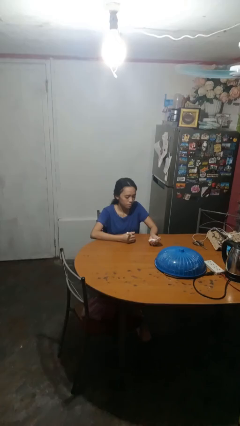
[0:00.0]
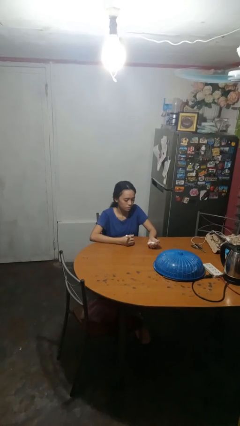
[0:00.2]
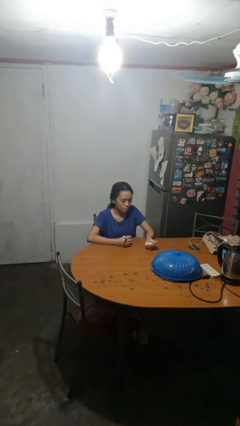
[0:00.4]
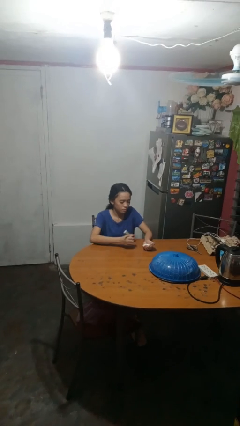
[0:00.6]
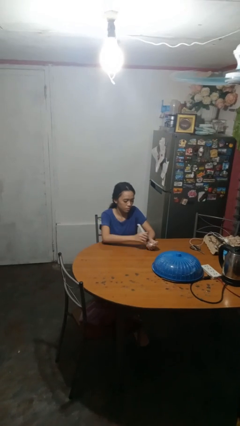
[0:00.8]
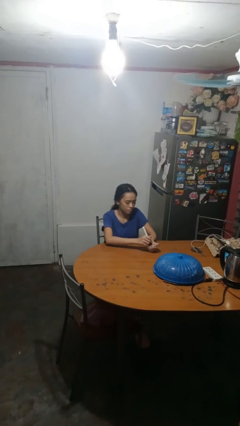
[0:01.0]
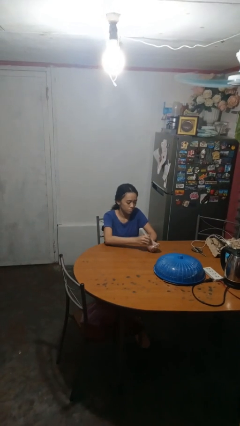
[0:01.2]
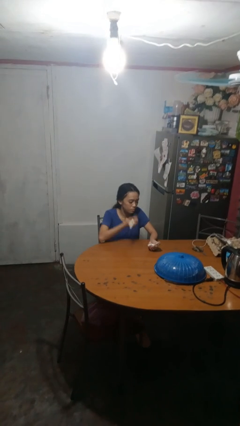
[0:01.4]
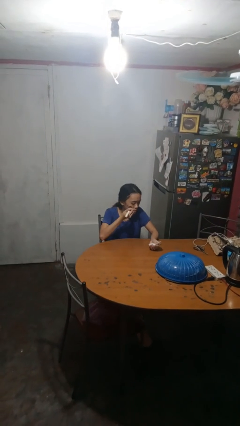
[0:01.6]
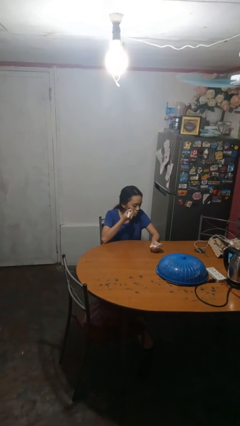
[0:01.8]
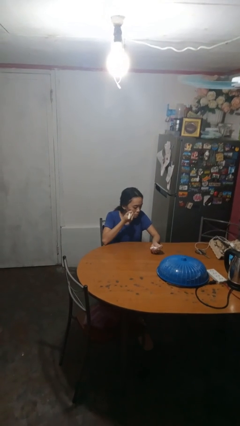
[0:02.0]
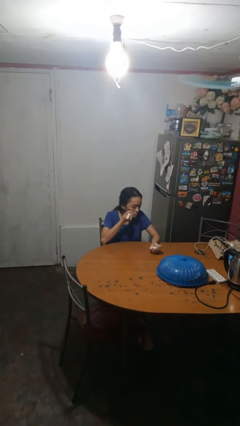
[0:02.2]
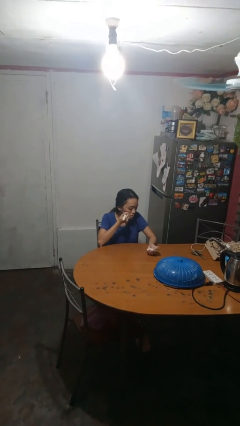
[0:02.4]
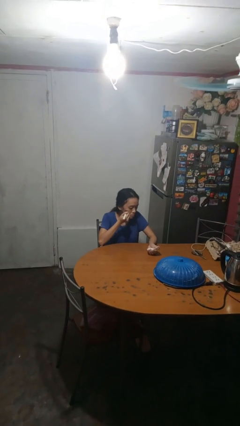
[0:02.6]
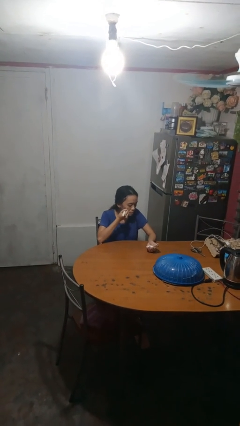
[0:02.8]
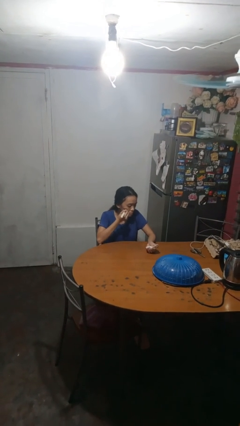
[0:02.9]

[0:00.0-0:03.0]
person applies foundation makeup

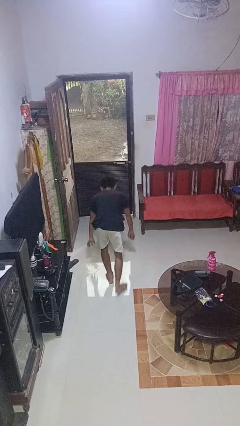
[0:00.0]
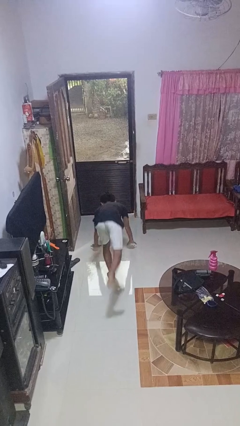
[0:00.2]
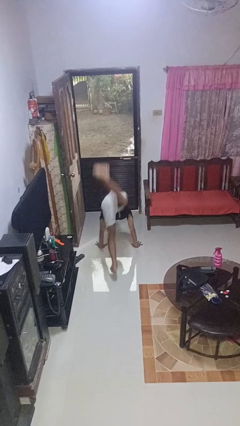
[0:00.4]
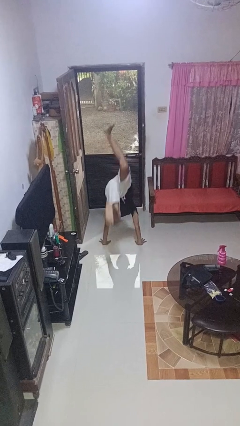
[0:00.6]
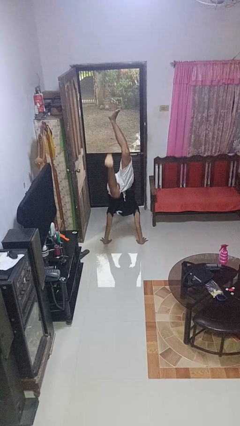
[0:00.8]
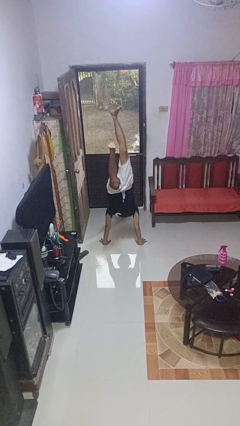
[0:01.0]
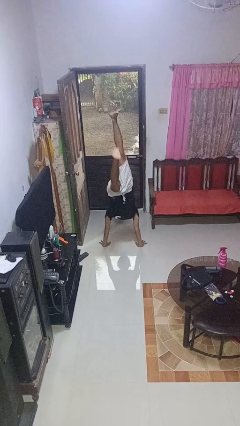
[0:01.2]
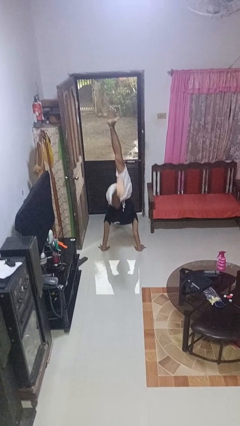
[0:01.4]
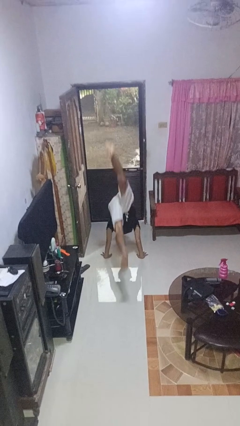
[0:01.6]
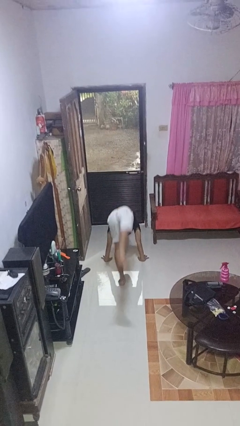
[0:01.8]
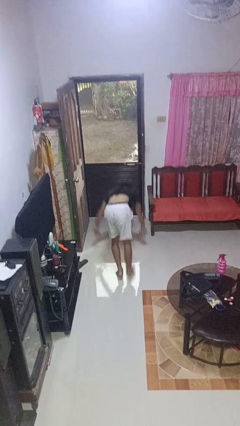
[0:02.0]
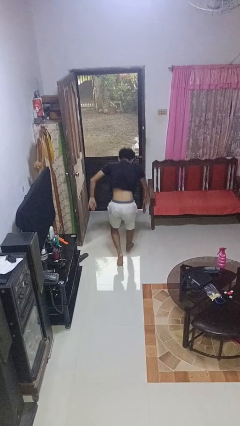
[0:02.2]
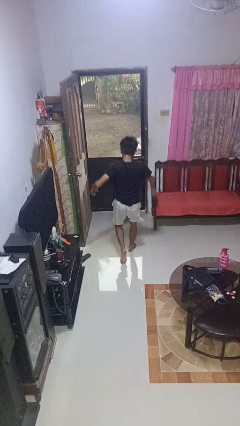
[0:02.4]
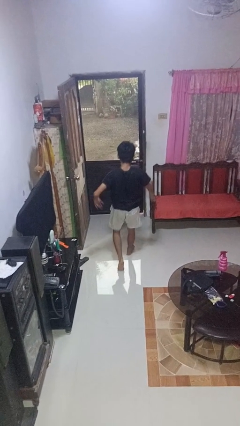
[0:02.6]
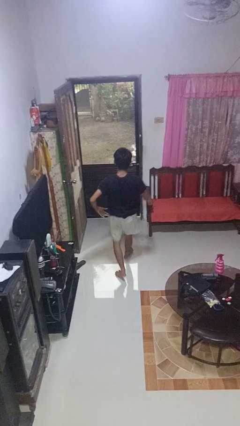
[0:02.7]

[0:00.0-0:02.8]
person handstand

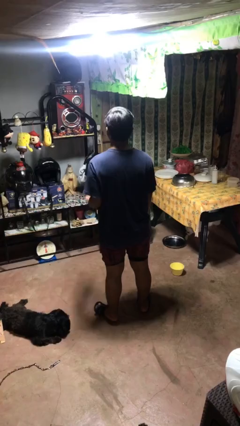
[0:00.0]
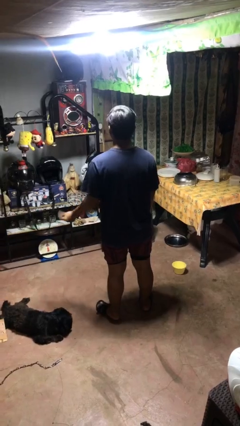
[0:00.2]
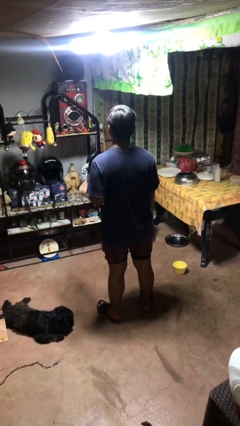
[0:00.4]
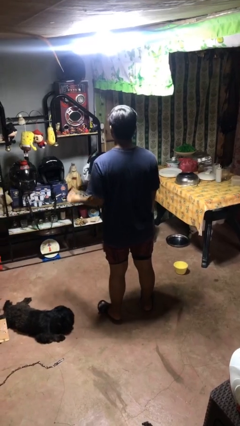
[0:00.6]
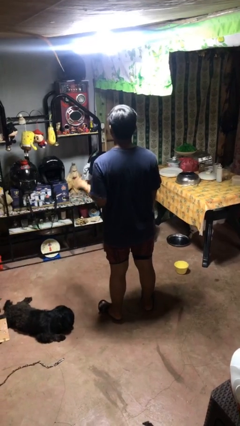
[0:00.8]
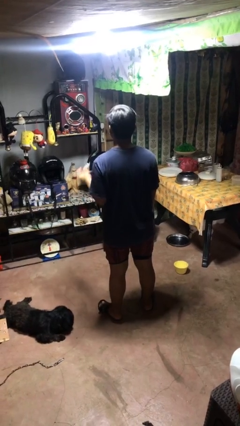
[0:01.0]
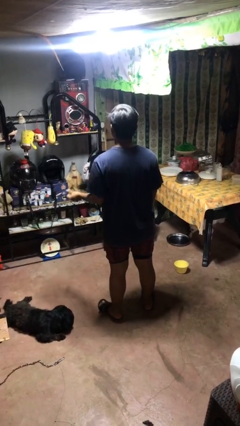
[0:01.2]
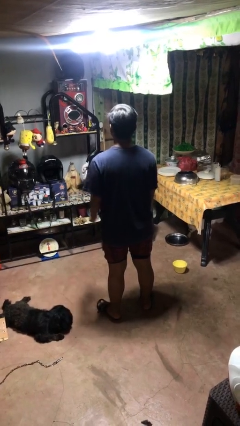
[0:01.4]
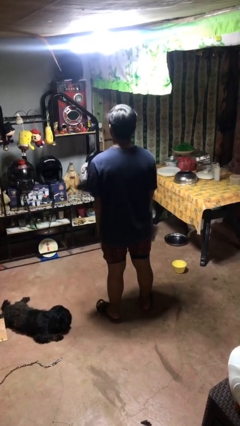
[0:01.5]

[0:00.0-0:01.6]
person snaps fingers

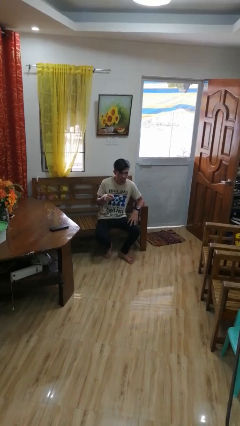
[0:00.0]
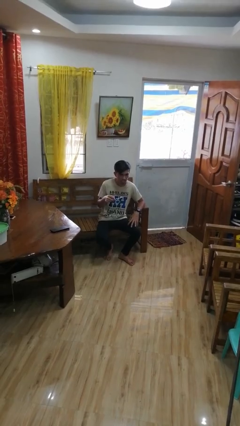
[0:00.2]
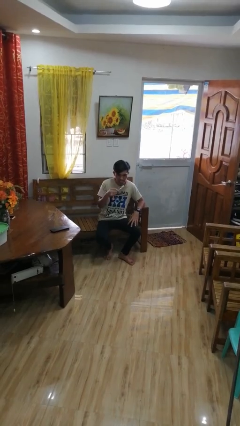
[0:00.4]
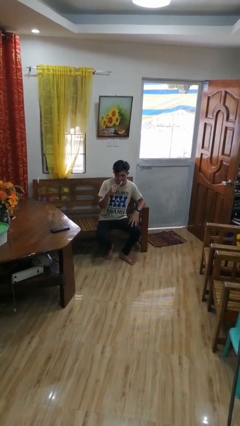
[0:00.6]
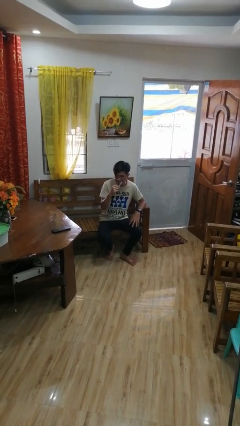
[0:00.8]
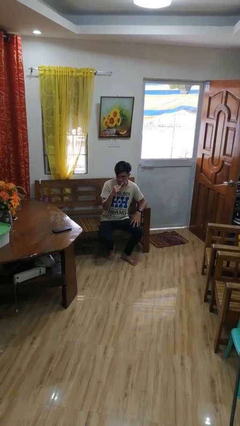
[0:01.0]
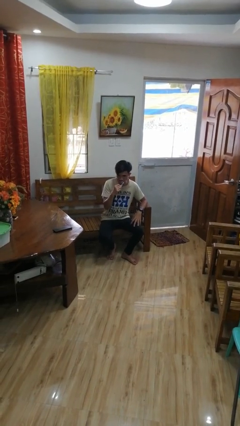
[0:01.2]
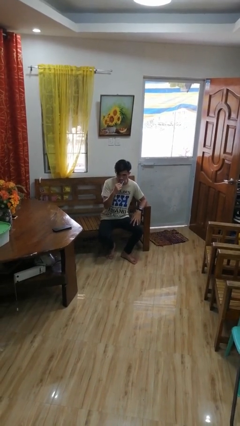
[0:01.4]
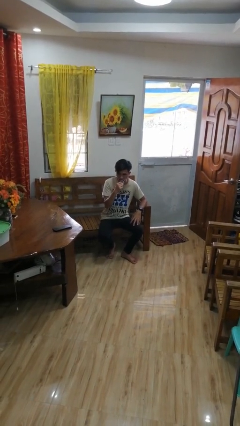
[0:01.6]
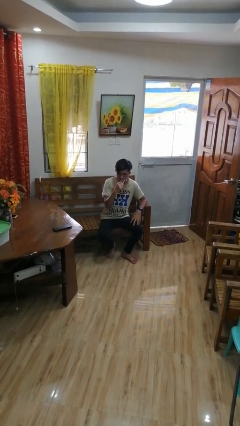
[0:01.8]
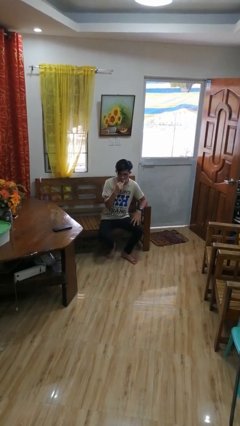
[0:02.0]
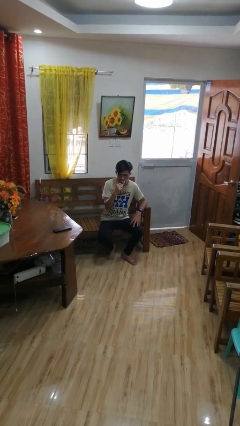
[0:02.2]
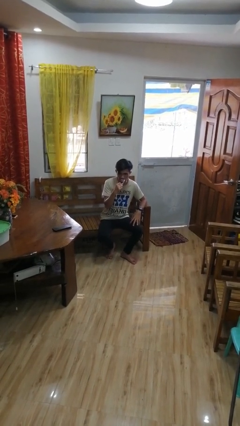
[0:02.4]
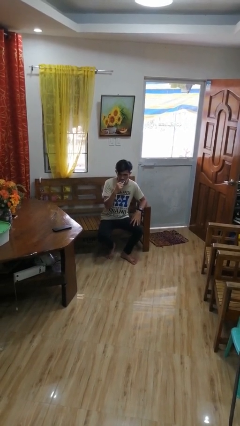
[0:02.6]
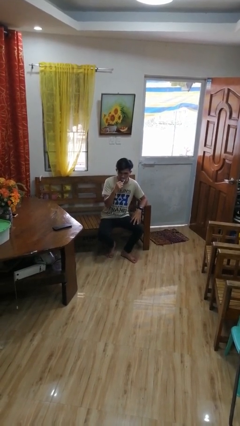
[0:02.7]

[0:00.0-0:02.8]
person brushes teeth

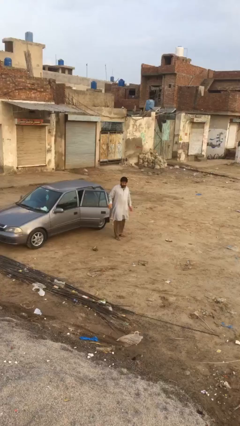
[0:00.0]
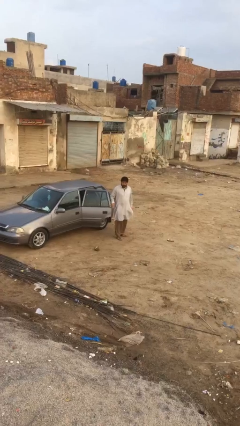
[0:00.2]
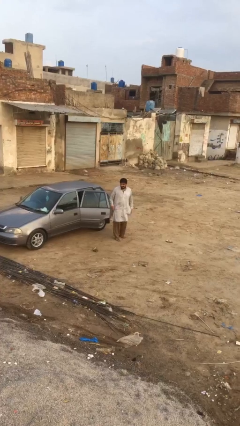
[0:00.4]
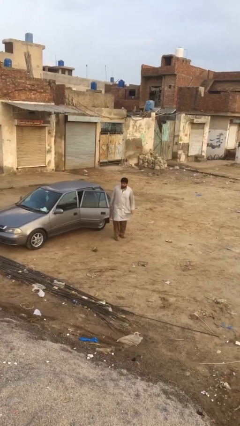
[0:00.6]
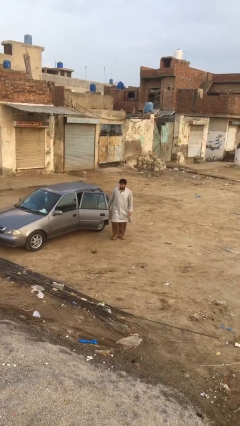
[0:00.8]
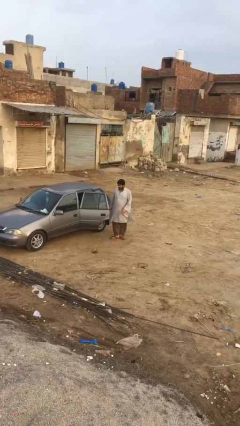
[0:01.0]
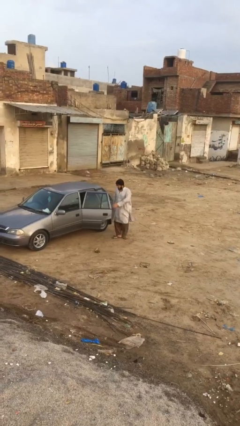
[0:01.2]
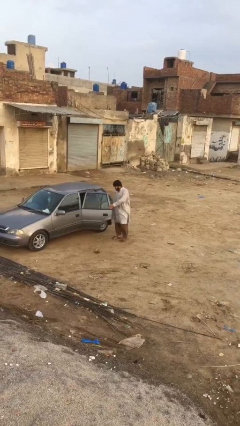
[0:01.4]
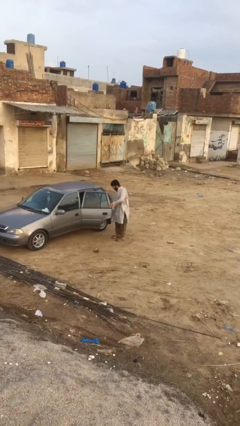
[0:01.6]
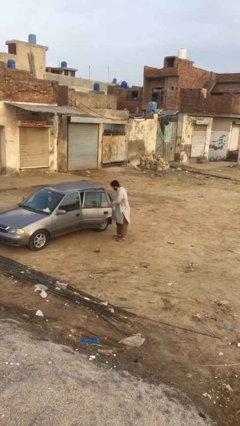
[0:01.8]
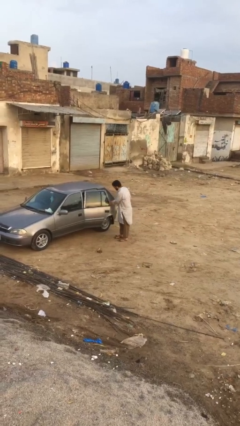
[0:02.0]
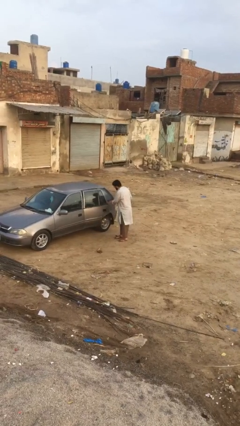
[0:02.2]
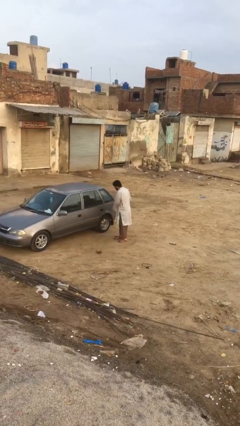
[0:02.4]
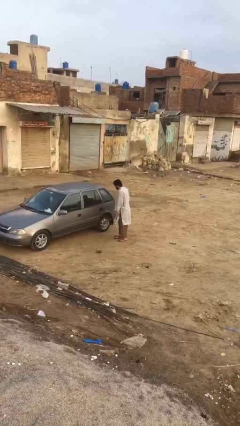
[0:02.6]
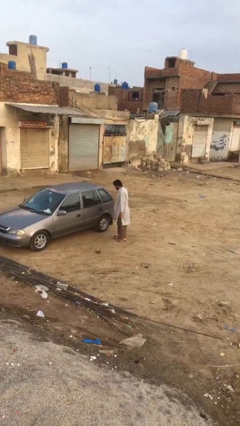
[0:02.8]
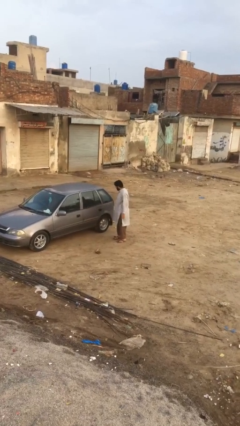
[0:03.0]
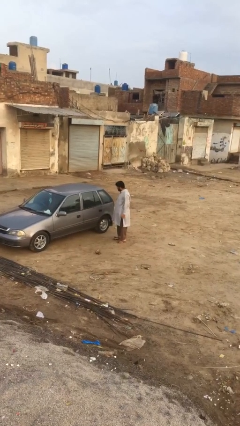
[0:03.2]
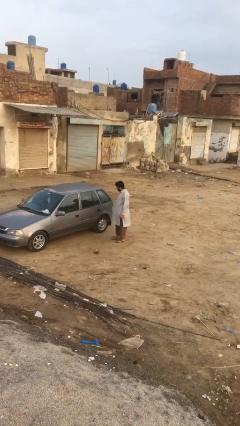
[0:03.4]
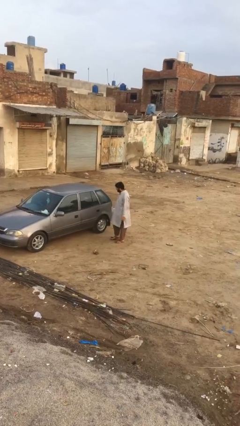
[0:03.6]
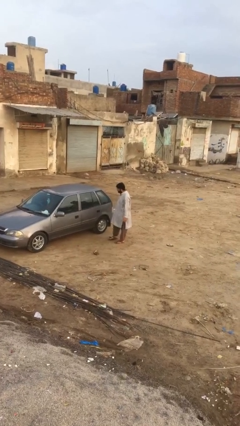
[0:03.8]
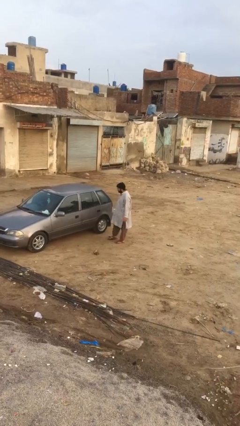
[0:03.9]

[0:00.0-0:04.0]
person closes car door

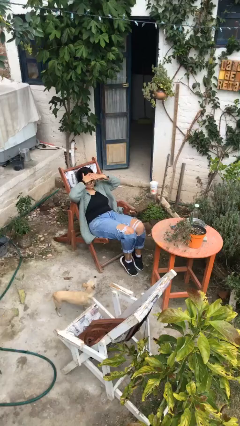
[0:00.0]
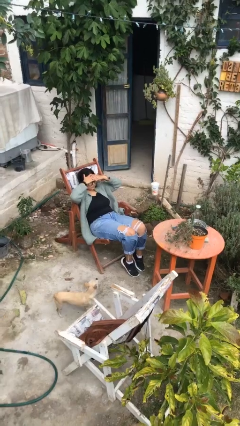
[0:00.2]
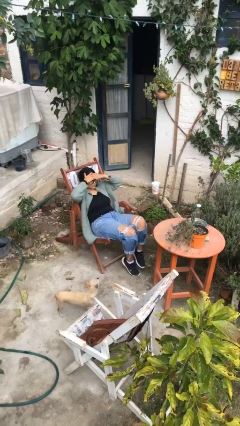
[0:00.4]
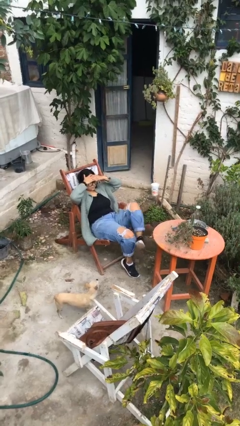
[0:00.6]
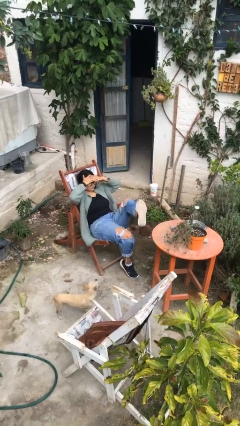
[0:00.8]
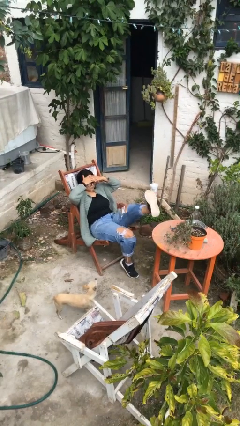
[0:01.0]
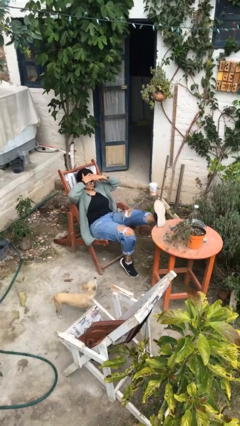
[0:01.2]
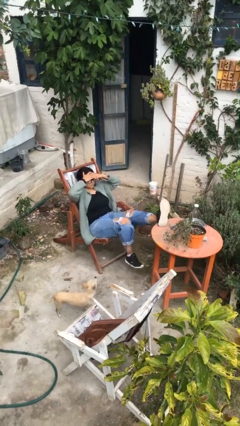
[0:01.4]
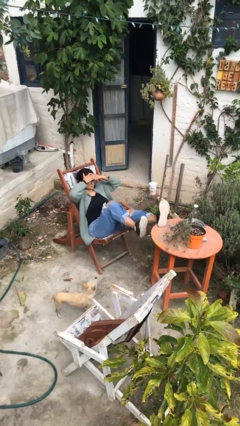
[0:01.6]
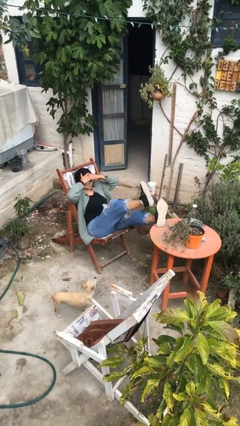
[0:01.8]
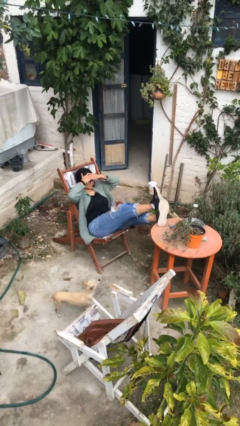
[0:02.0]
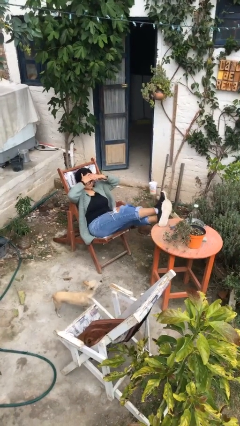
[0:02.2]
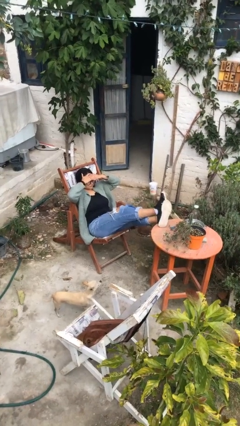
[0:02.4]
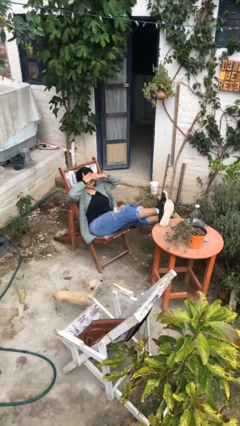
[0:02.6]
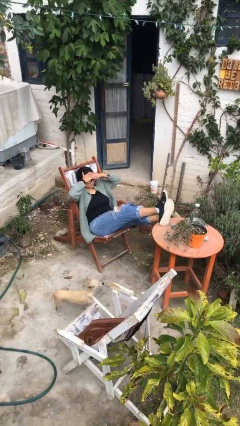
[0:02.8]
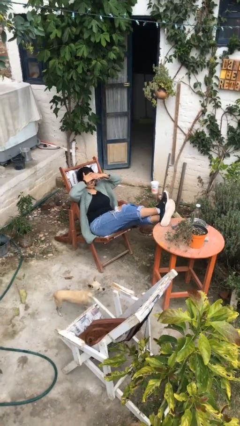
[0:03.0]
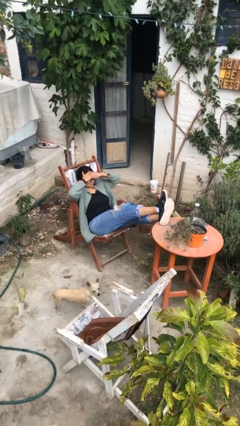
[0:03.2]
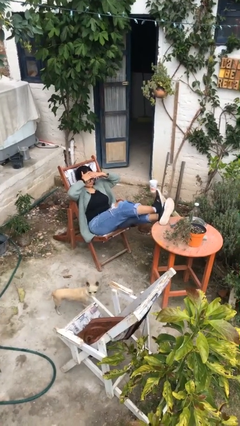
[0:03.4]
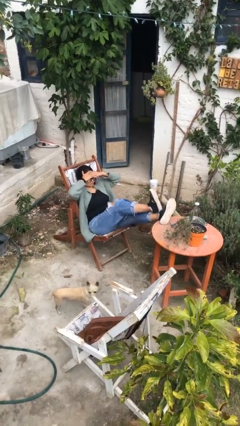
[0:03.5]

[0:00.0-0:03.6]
person puts feet up
